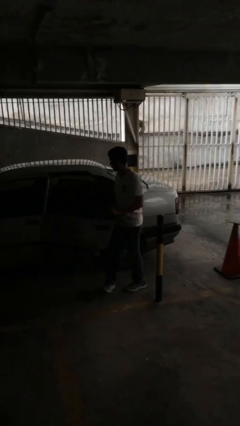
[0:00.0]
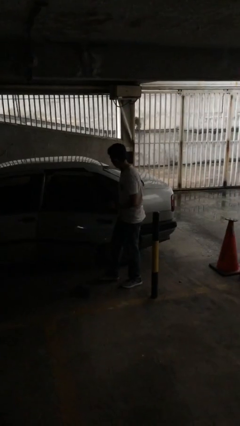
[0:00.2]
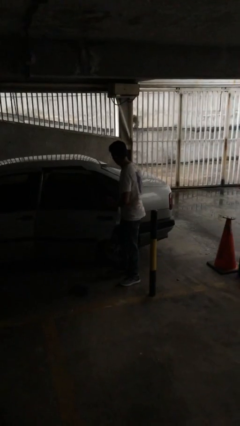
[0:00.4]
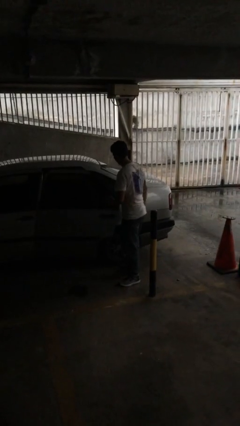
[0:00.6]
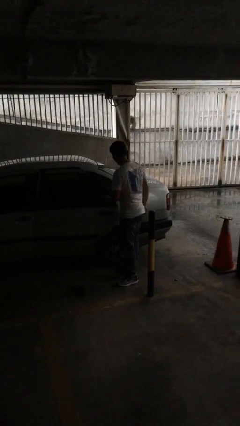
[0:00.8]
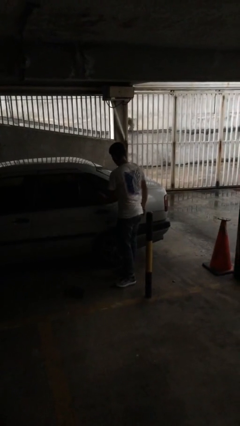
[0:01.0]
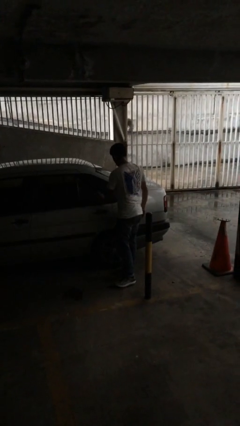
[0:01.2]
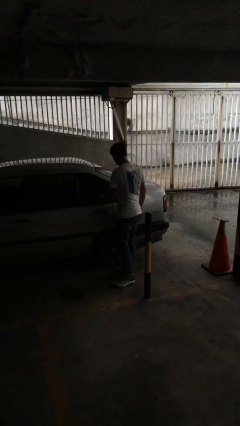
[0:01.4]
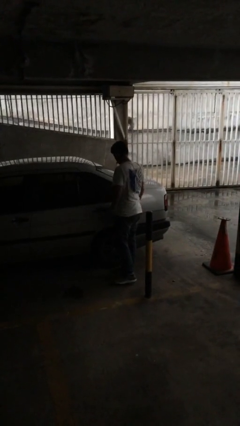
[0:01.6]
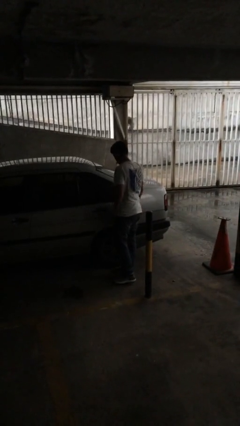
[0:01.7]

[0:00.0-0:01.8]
person closes car door

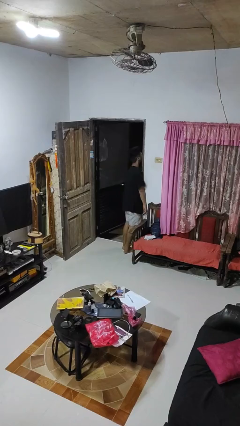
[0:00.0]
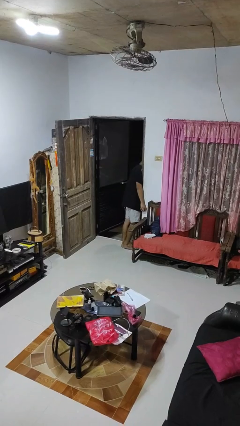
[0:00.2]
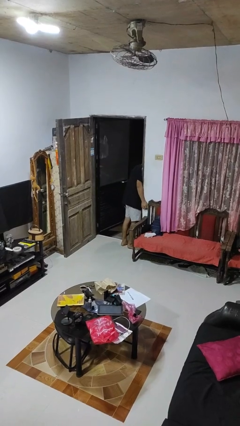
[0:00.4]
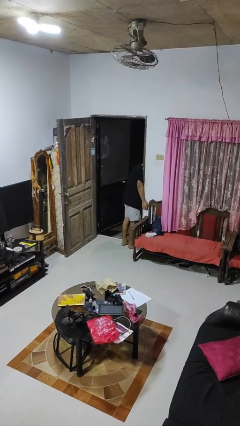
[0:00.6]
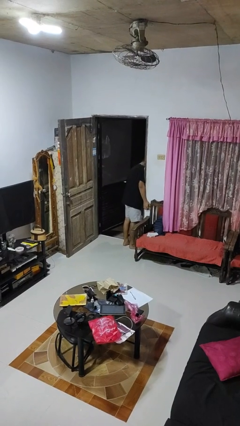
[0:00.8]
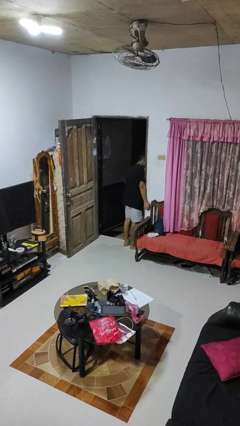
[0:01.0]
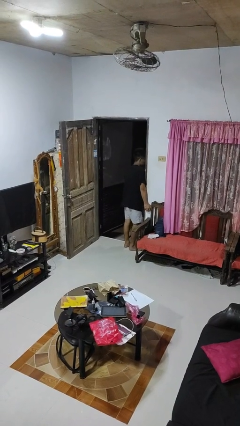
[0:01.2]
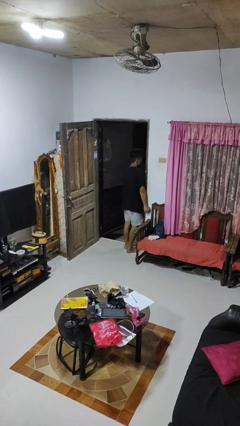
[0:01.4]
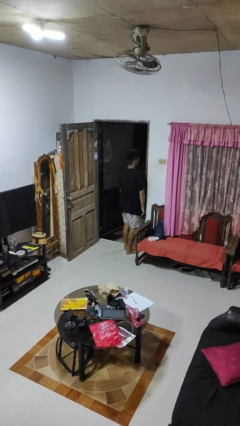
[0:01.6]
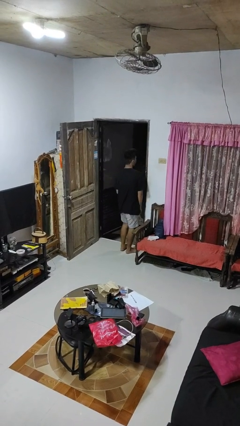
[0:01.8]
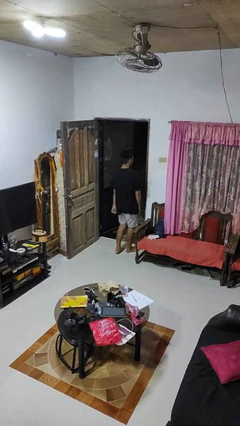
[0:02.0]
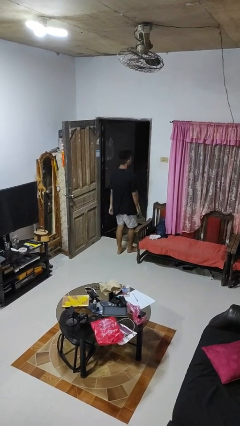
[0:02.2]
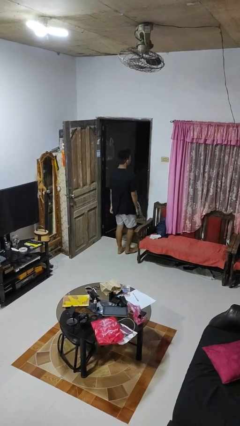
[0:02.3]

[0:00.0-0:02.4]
person bumps into wall

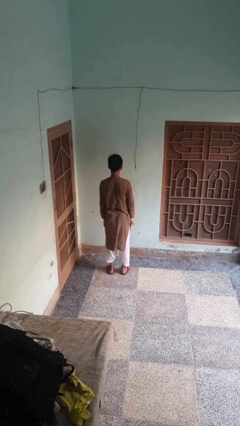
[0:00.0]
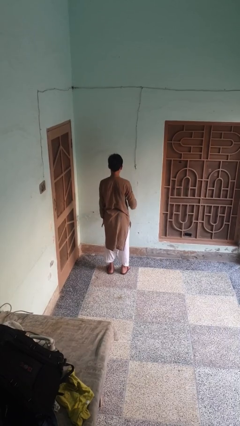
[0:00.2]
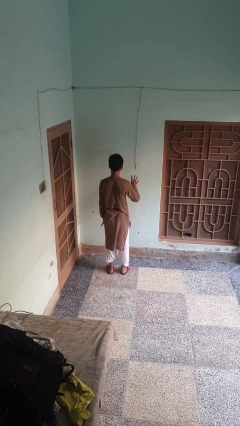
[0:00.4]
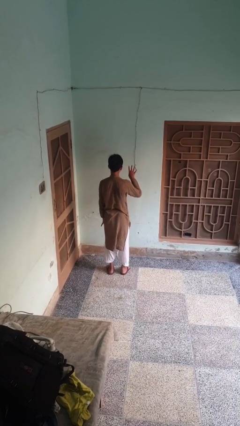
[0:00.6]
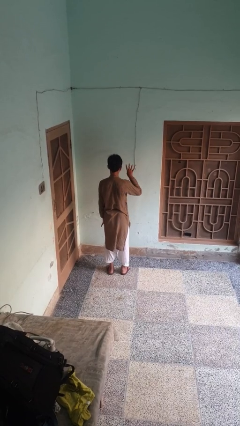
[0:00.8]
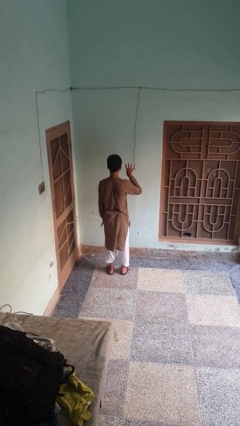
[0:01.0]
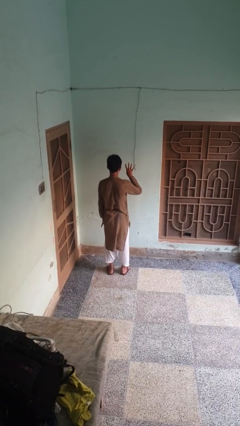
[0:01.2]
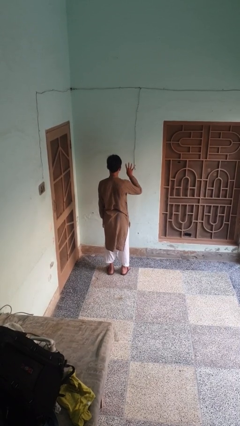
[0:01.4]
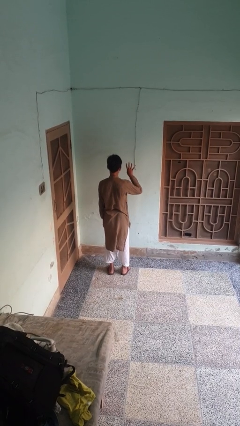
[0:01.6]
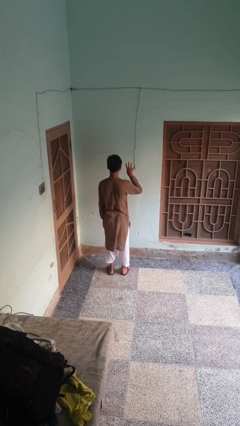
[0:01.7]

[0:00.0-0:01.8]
person gestures number four

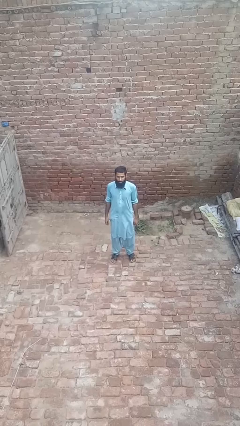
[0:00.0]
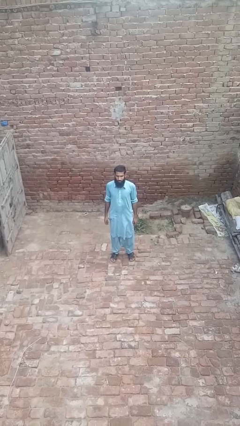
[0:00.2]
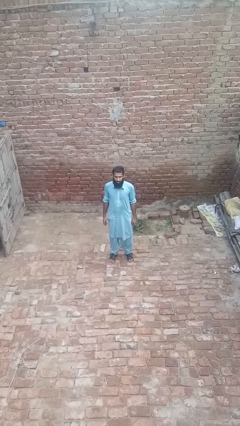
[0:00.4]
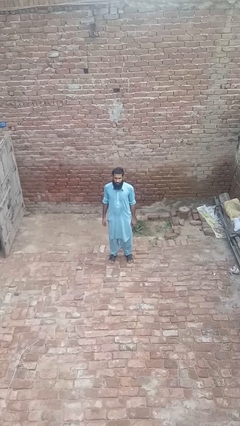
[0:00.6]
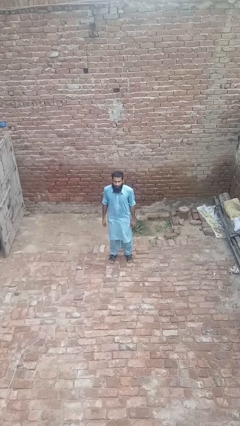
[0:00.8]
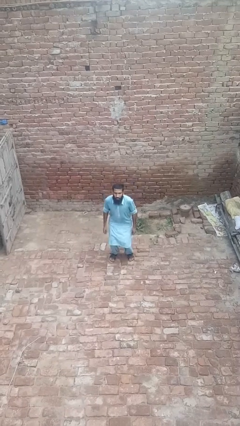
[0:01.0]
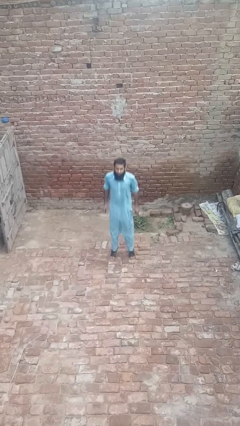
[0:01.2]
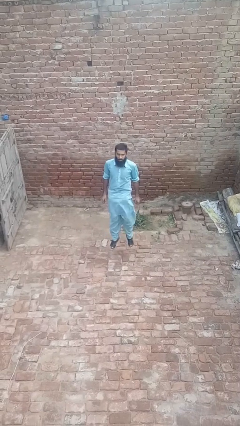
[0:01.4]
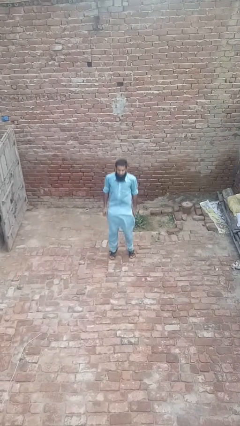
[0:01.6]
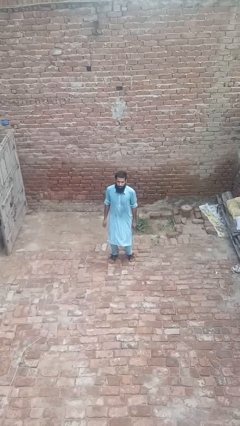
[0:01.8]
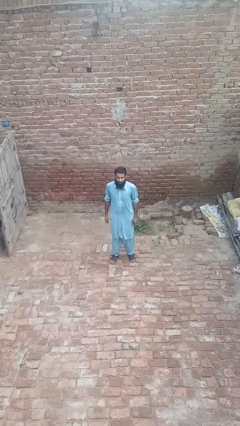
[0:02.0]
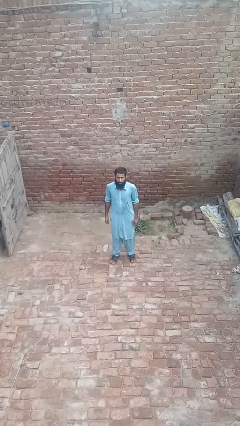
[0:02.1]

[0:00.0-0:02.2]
person jumps

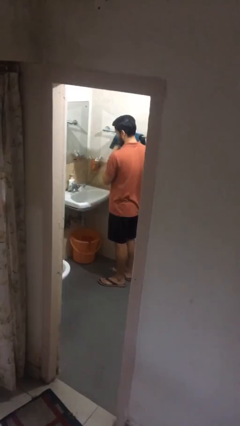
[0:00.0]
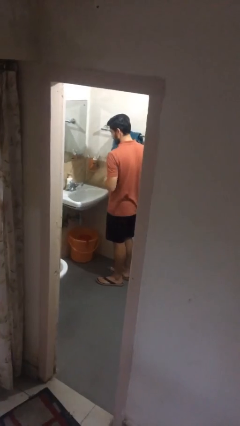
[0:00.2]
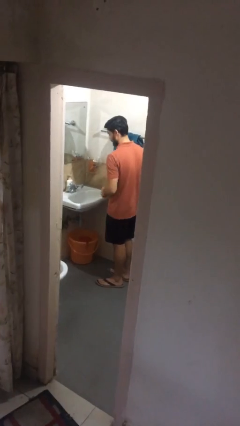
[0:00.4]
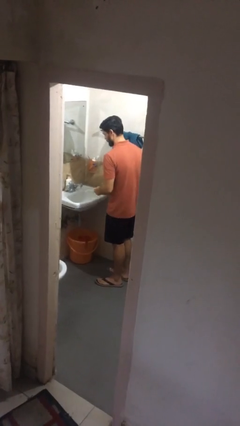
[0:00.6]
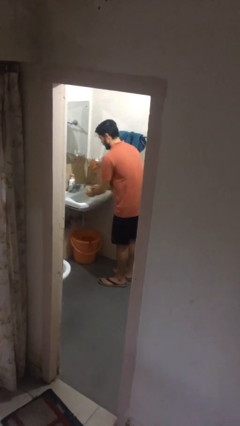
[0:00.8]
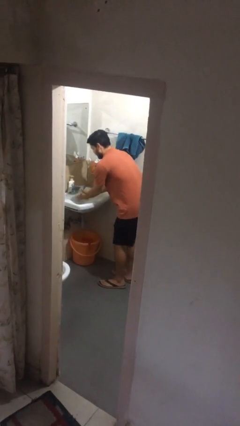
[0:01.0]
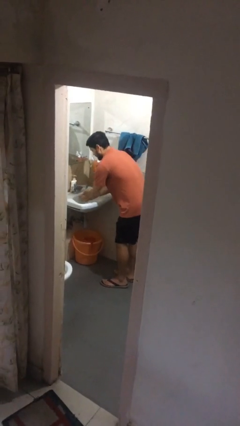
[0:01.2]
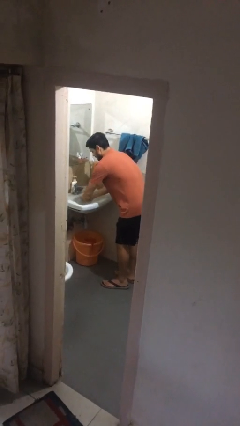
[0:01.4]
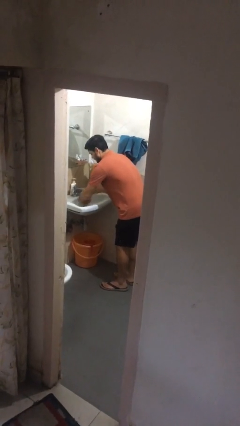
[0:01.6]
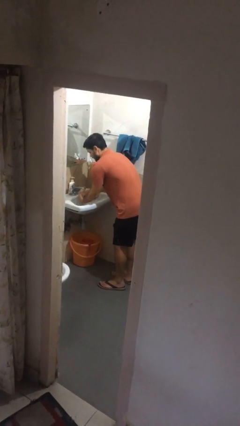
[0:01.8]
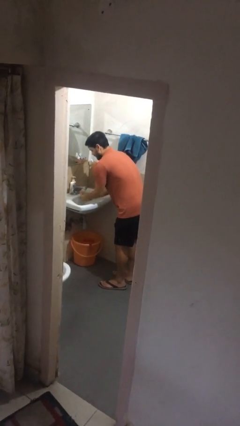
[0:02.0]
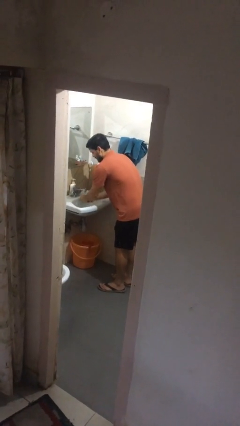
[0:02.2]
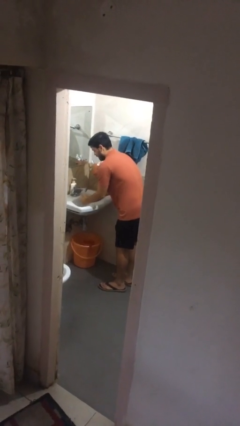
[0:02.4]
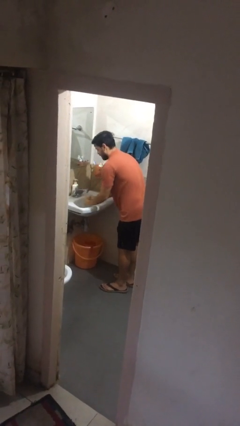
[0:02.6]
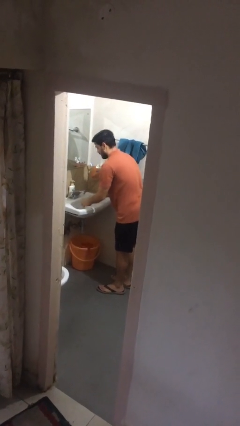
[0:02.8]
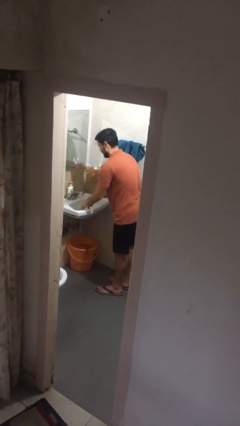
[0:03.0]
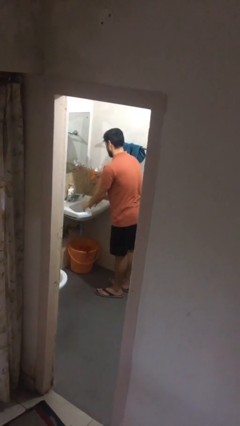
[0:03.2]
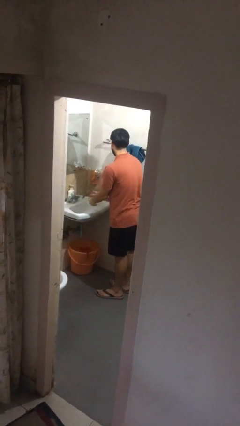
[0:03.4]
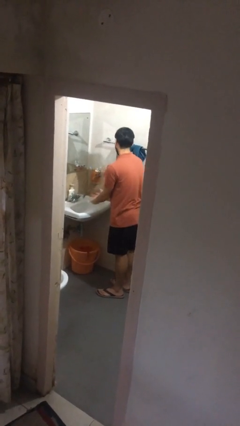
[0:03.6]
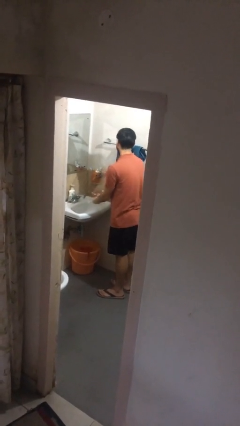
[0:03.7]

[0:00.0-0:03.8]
person washes hands

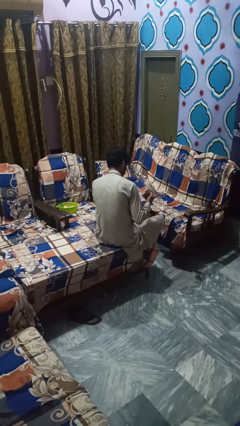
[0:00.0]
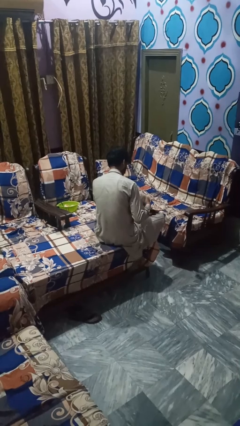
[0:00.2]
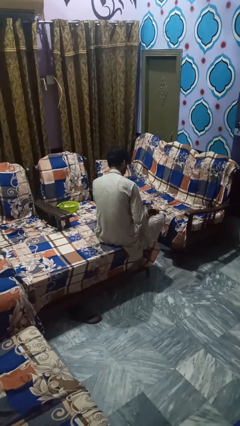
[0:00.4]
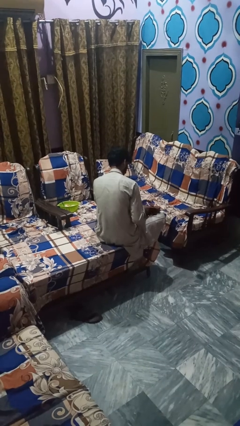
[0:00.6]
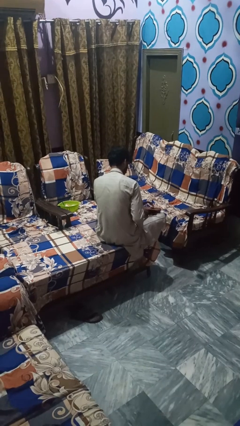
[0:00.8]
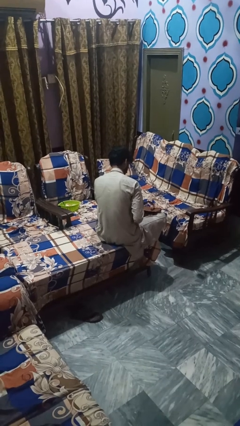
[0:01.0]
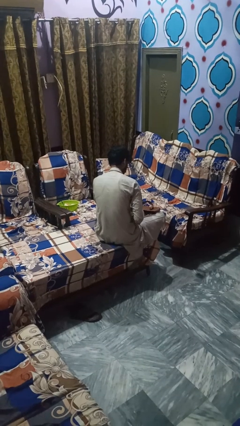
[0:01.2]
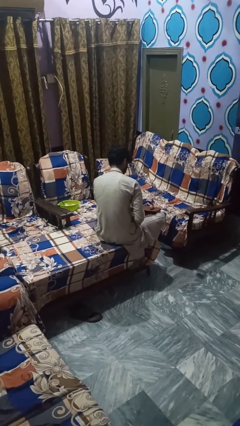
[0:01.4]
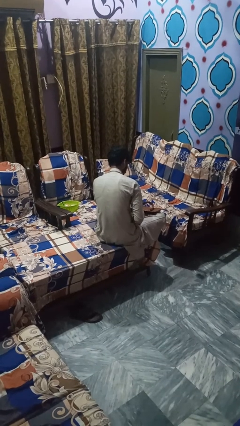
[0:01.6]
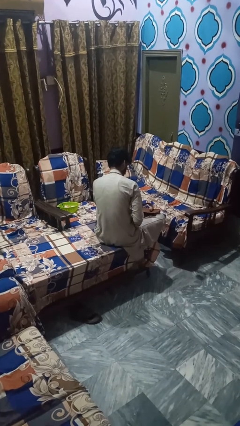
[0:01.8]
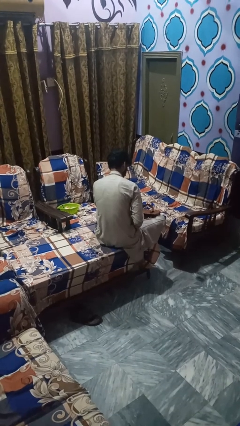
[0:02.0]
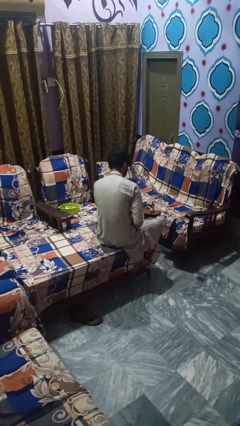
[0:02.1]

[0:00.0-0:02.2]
person puts object into bag

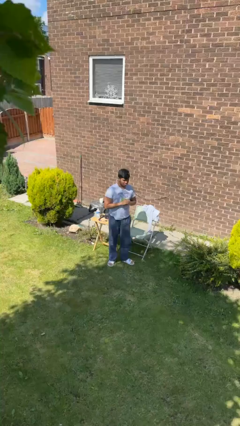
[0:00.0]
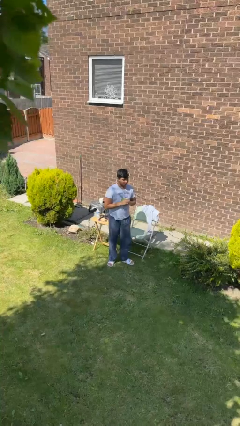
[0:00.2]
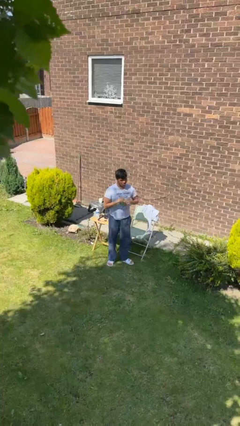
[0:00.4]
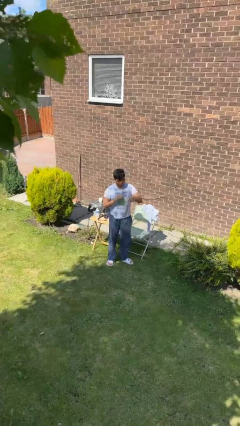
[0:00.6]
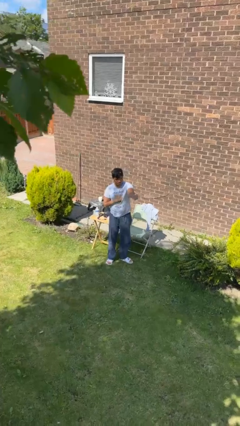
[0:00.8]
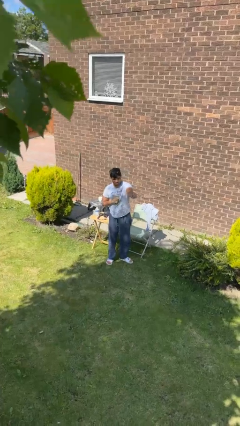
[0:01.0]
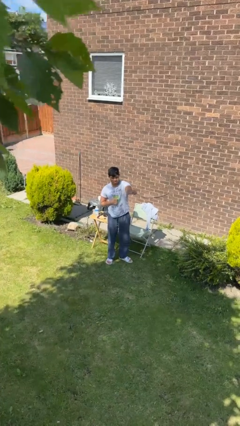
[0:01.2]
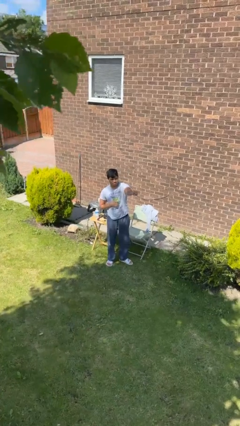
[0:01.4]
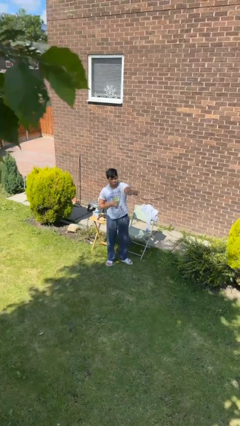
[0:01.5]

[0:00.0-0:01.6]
person punches

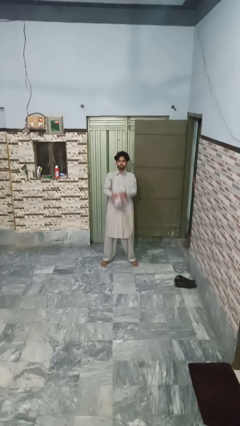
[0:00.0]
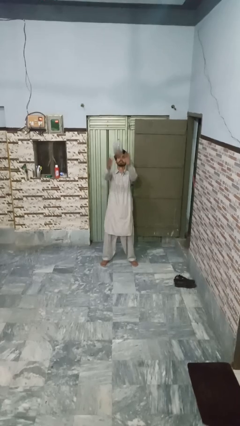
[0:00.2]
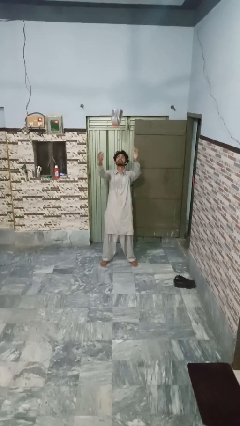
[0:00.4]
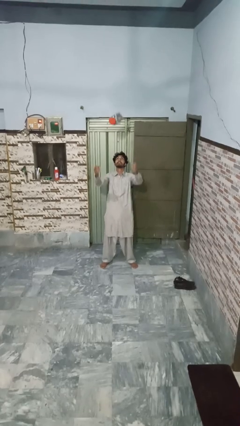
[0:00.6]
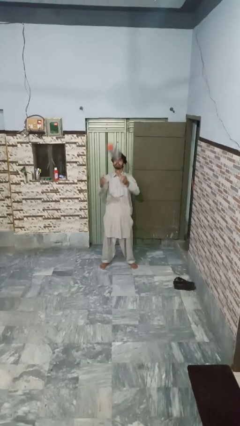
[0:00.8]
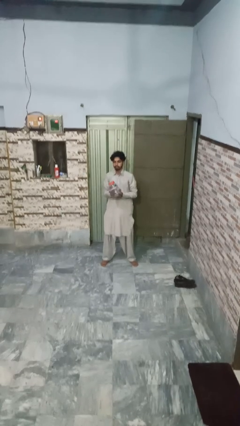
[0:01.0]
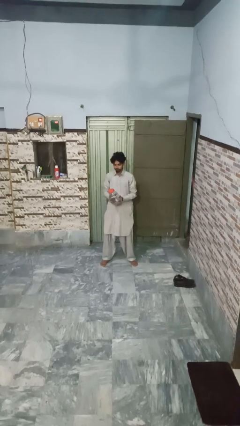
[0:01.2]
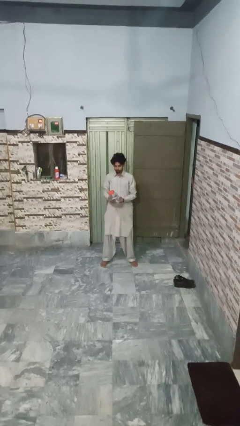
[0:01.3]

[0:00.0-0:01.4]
person drops object
